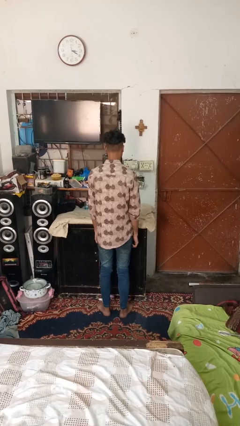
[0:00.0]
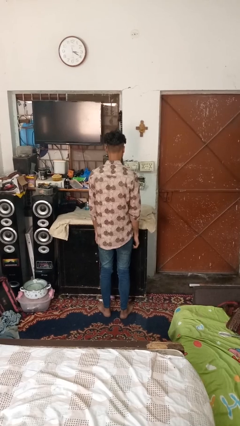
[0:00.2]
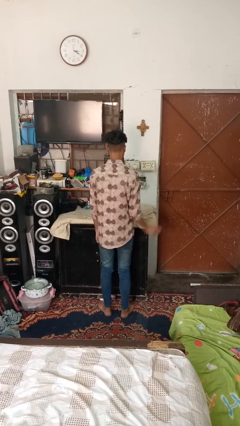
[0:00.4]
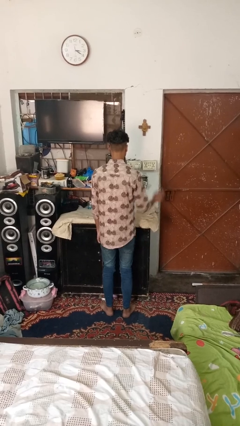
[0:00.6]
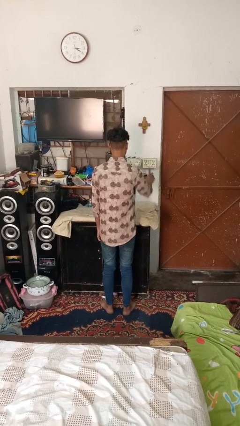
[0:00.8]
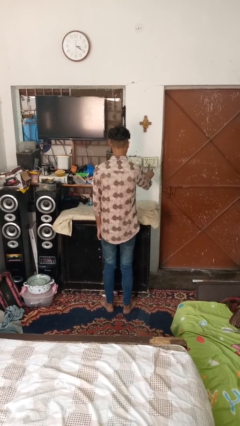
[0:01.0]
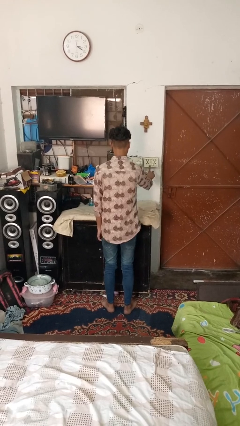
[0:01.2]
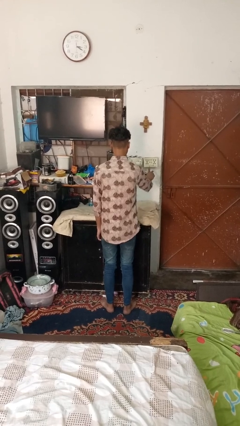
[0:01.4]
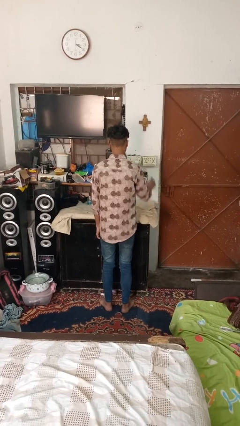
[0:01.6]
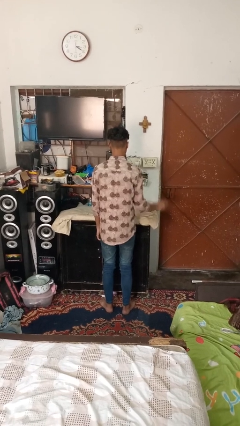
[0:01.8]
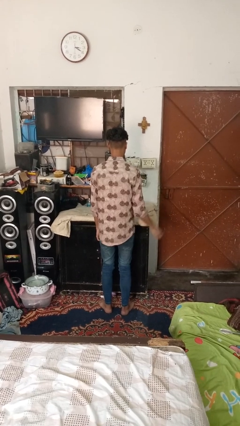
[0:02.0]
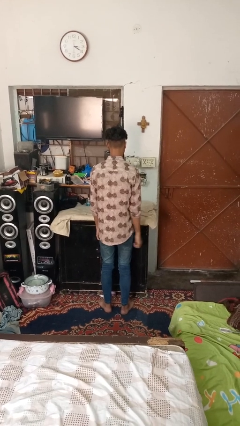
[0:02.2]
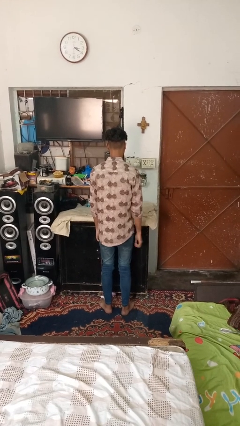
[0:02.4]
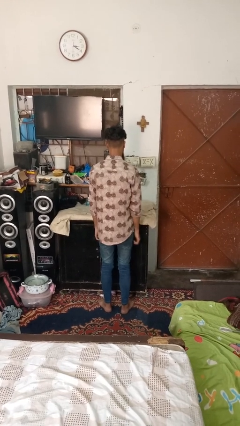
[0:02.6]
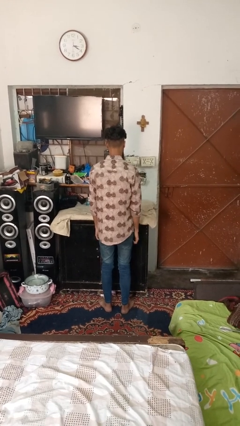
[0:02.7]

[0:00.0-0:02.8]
person turns on fan

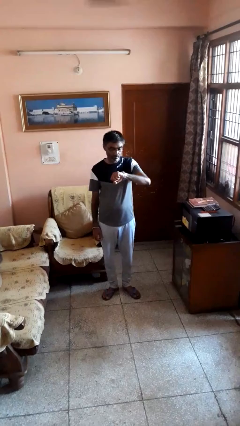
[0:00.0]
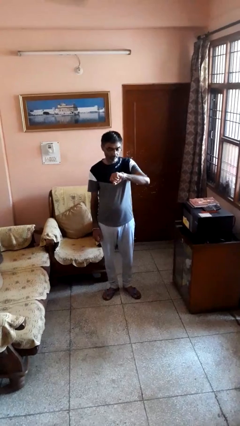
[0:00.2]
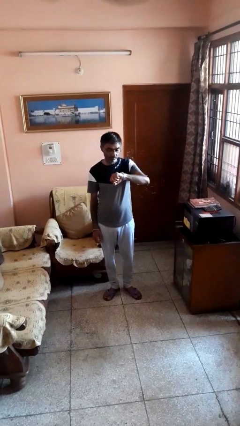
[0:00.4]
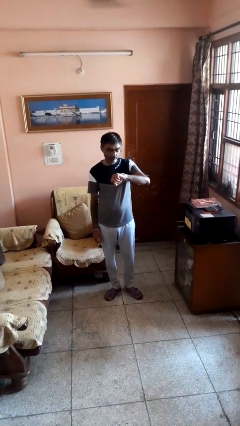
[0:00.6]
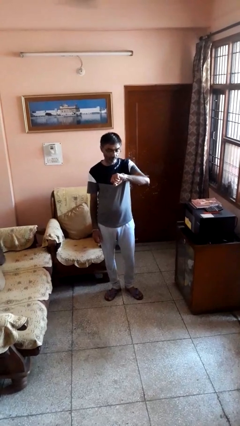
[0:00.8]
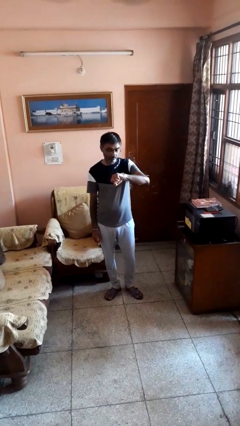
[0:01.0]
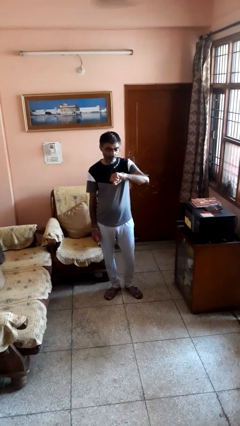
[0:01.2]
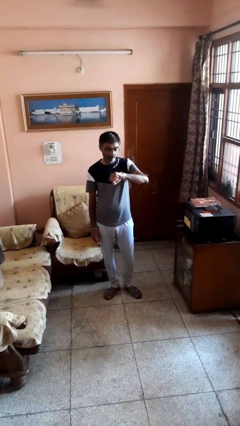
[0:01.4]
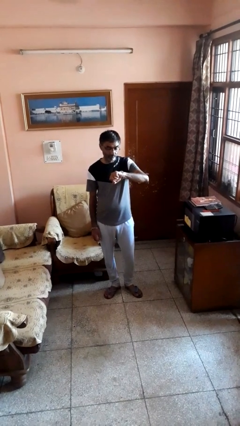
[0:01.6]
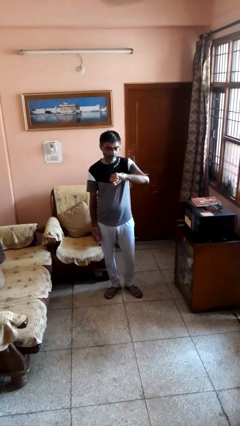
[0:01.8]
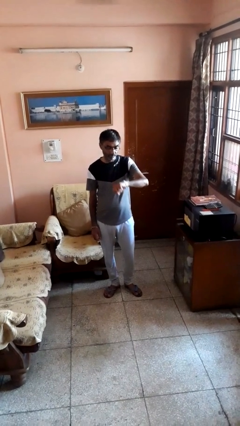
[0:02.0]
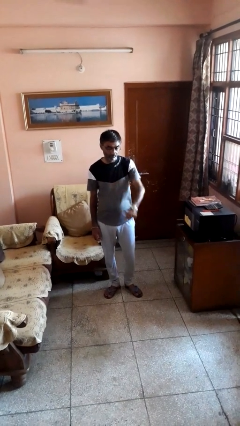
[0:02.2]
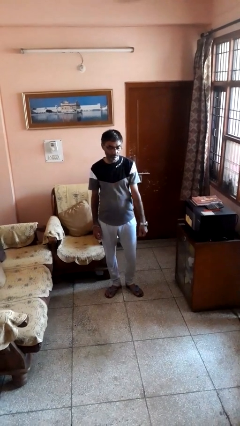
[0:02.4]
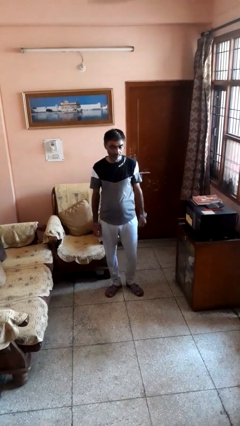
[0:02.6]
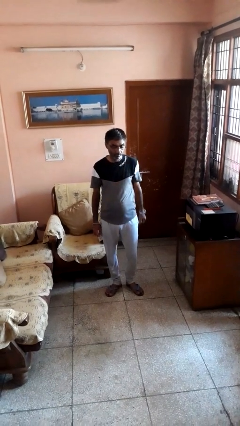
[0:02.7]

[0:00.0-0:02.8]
person looks at wristwatch

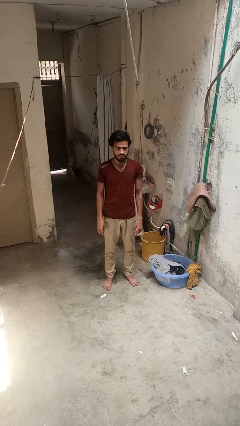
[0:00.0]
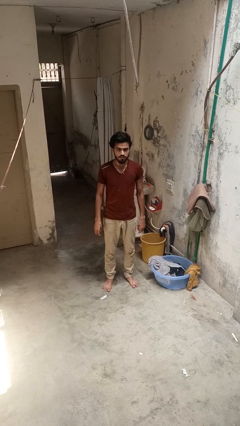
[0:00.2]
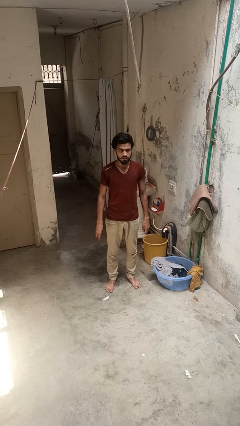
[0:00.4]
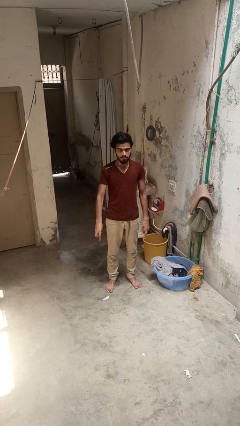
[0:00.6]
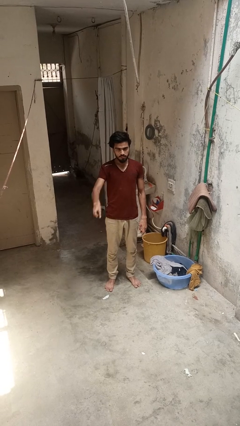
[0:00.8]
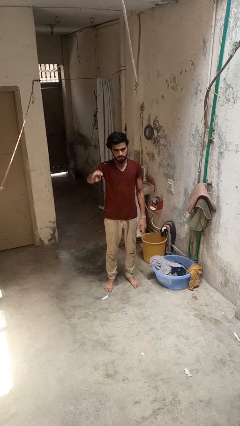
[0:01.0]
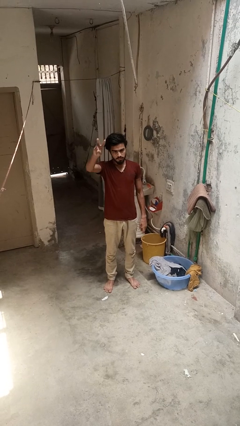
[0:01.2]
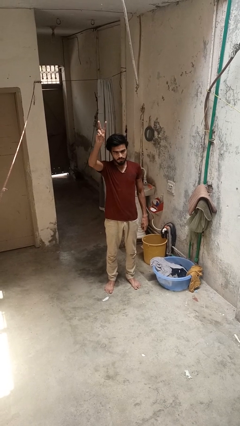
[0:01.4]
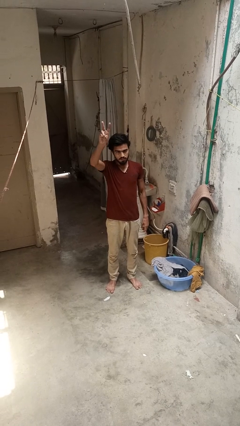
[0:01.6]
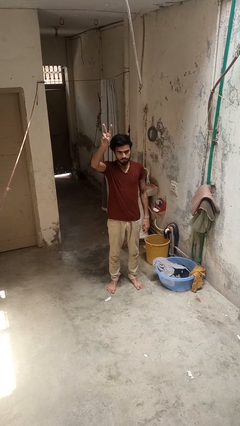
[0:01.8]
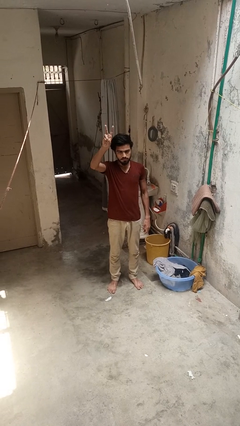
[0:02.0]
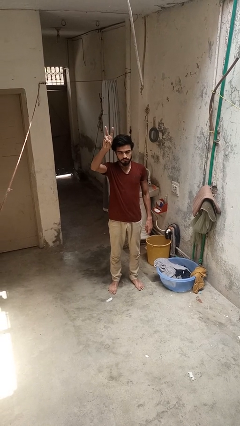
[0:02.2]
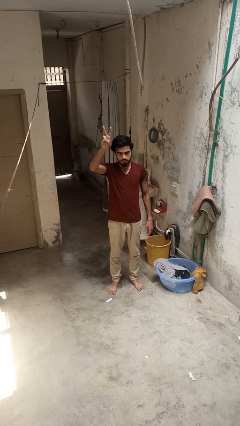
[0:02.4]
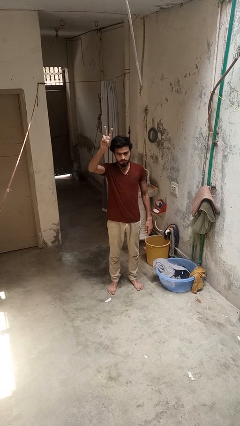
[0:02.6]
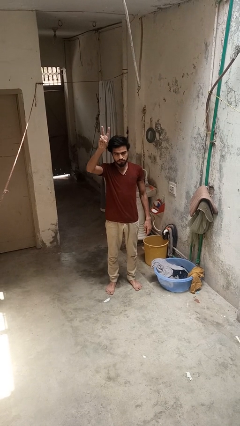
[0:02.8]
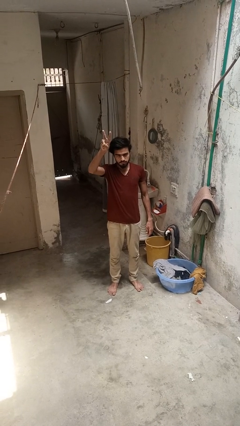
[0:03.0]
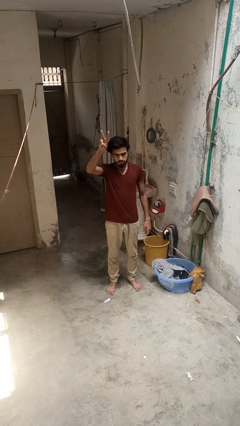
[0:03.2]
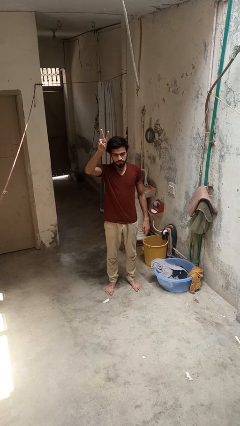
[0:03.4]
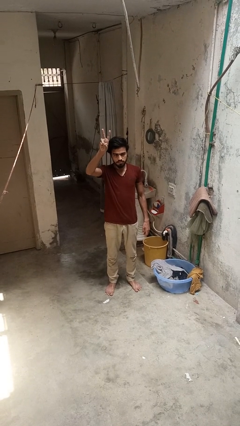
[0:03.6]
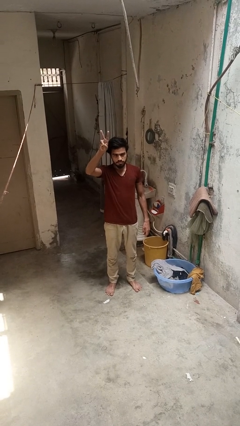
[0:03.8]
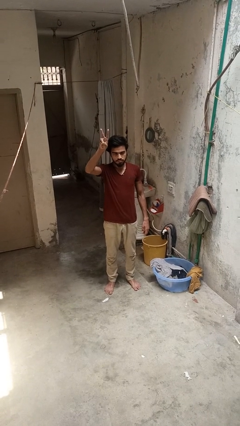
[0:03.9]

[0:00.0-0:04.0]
person gestures peace

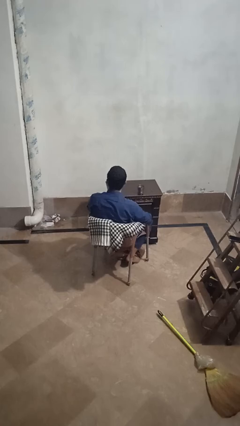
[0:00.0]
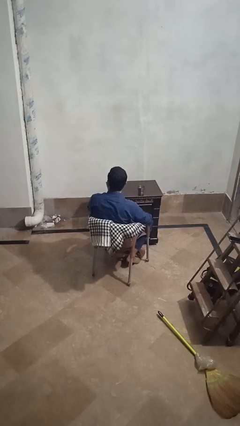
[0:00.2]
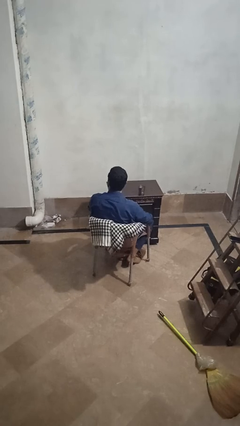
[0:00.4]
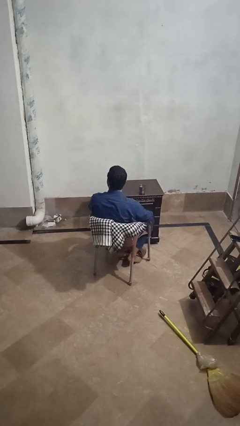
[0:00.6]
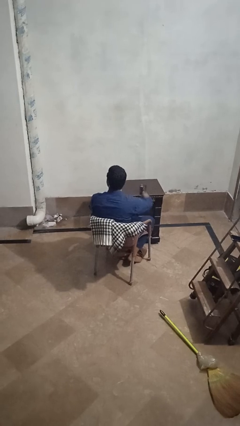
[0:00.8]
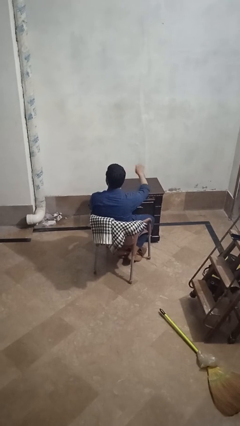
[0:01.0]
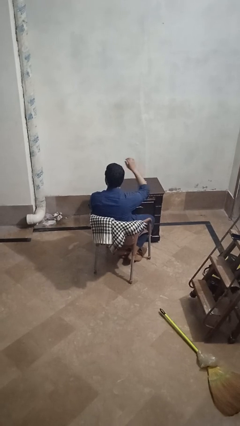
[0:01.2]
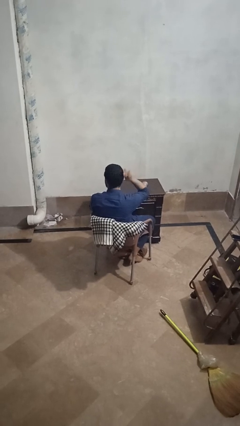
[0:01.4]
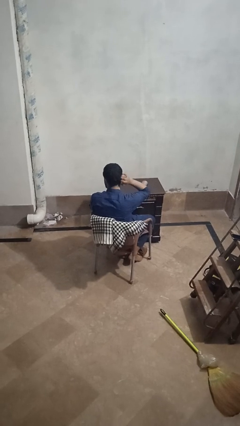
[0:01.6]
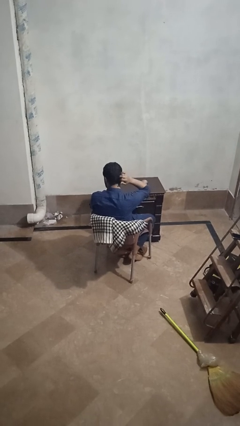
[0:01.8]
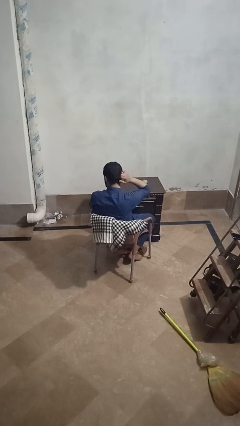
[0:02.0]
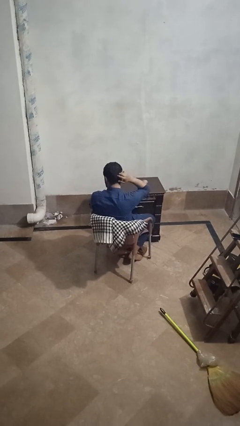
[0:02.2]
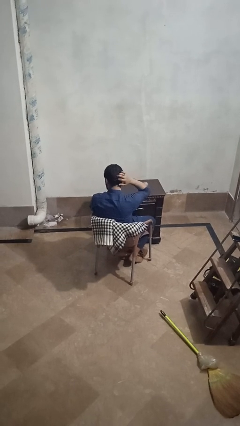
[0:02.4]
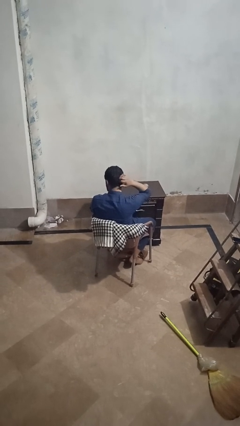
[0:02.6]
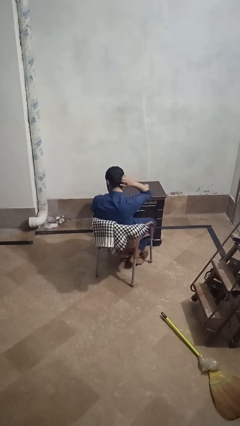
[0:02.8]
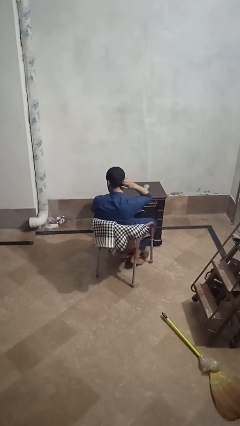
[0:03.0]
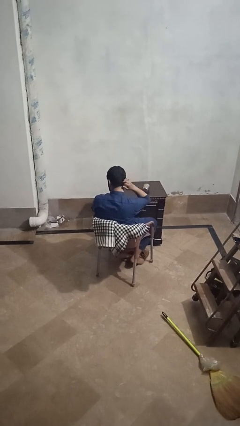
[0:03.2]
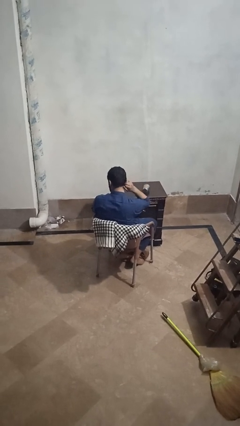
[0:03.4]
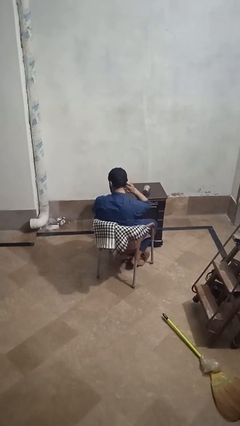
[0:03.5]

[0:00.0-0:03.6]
person knocks over glass

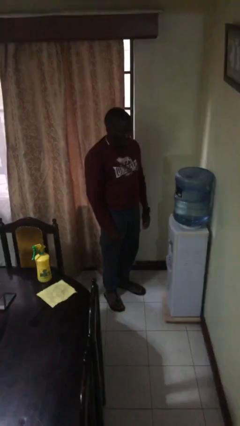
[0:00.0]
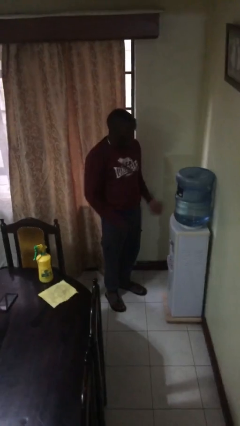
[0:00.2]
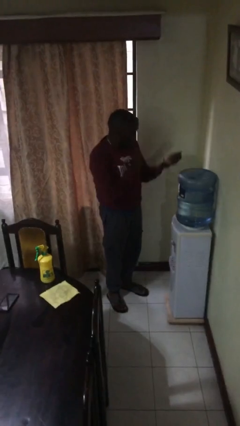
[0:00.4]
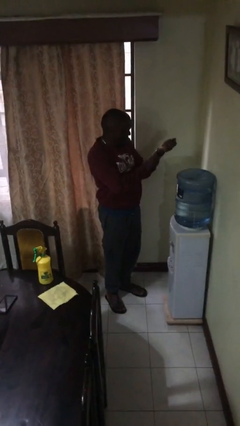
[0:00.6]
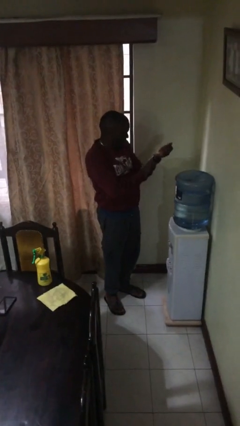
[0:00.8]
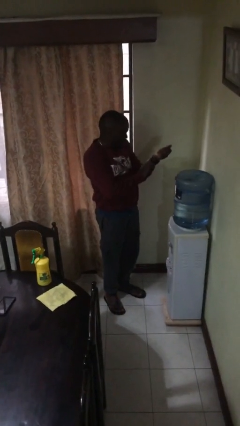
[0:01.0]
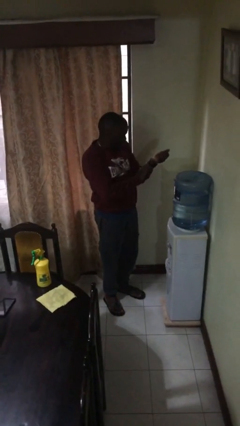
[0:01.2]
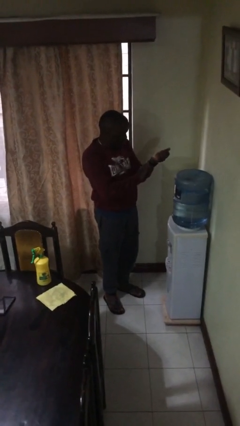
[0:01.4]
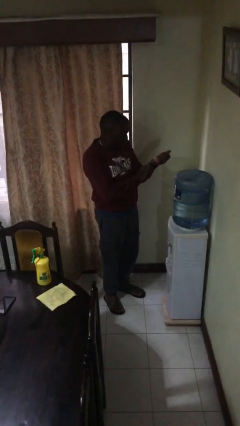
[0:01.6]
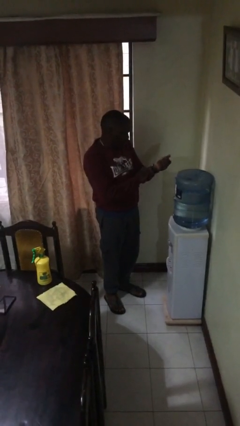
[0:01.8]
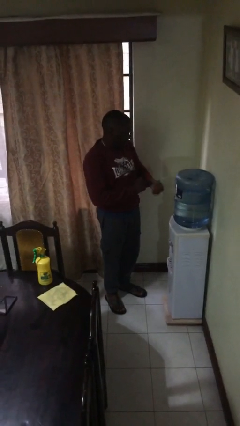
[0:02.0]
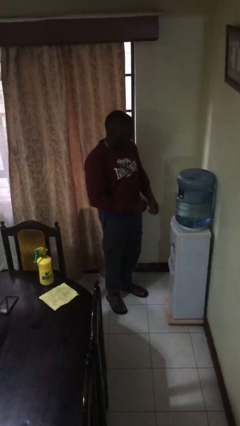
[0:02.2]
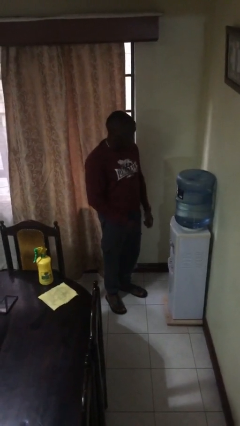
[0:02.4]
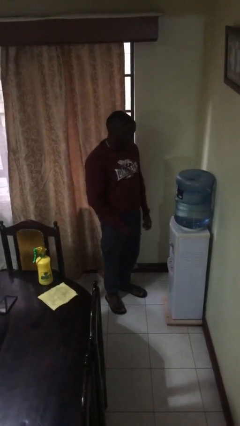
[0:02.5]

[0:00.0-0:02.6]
person swats bug

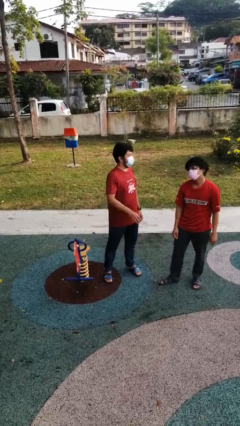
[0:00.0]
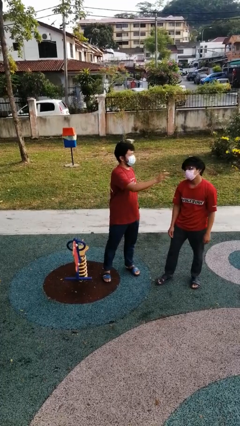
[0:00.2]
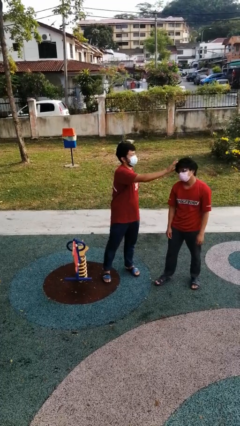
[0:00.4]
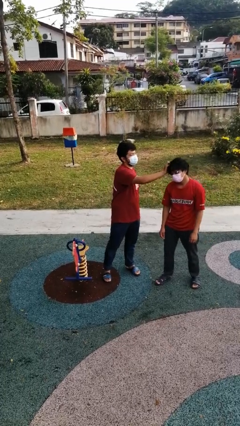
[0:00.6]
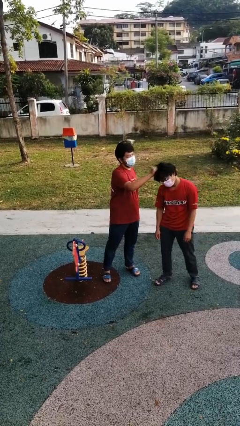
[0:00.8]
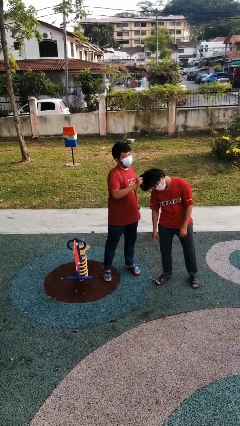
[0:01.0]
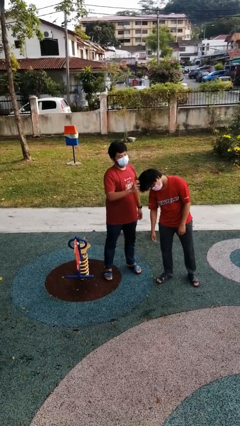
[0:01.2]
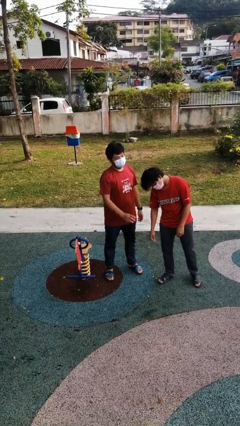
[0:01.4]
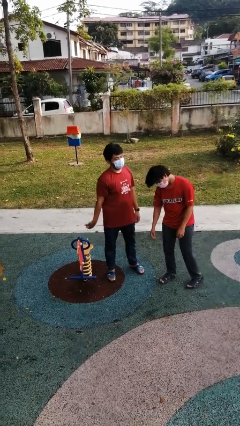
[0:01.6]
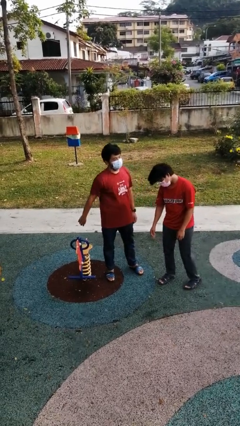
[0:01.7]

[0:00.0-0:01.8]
person grabs person by hair

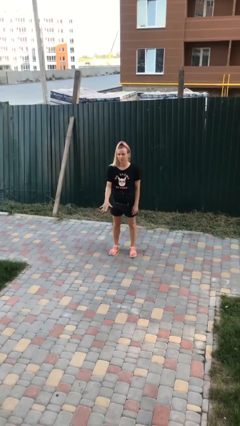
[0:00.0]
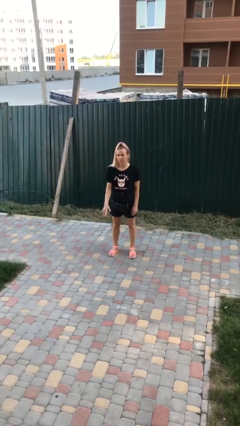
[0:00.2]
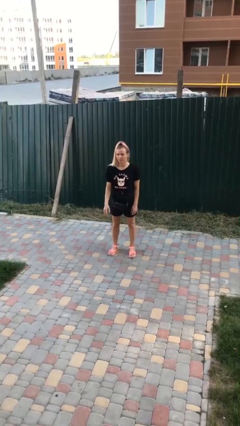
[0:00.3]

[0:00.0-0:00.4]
person gestures swipe down
